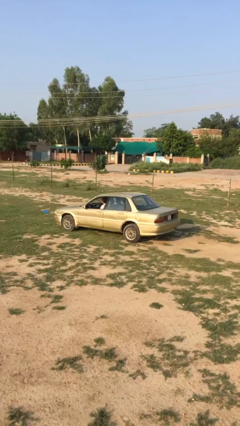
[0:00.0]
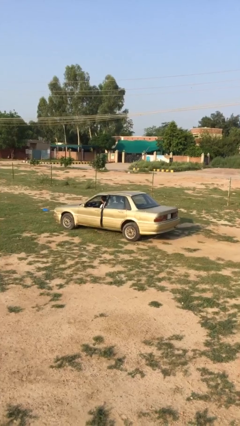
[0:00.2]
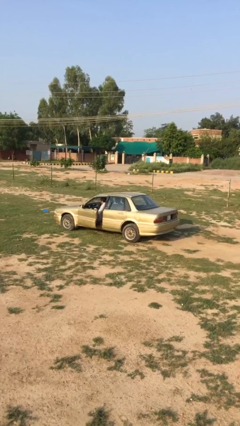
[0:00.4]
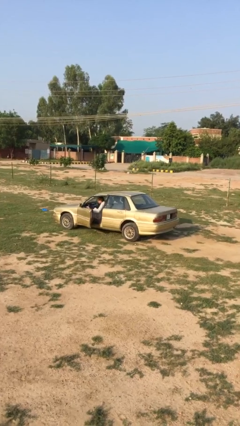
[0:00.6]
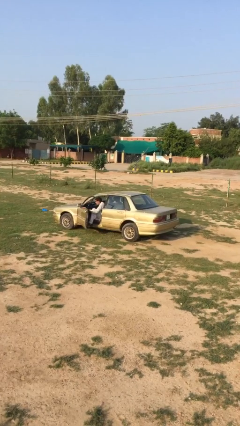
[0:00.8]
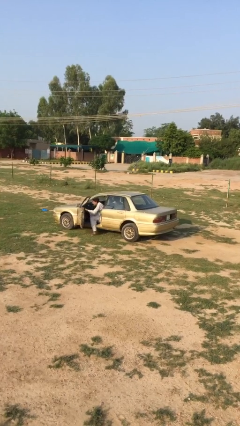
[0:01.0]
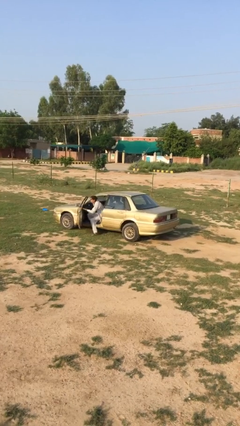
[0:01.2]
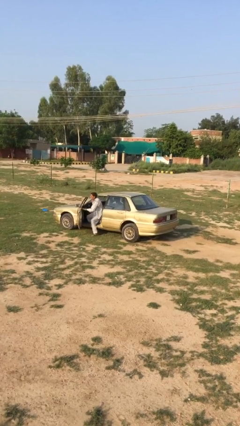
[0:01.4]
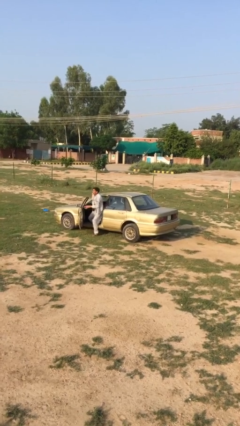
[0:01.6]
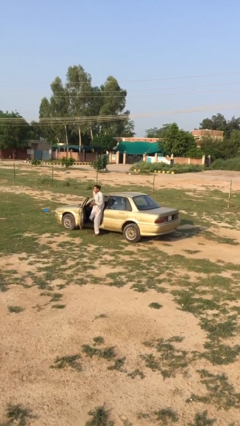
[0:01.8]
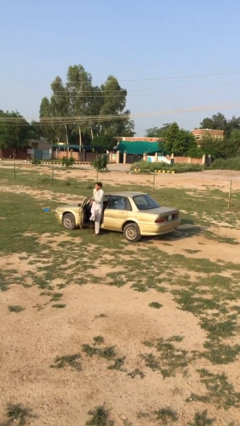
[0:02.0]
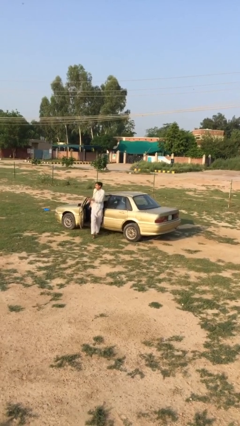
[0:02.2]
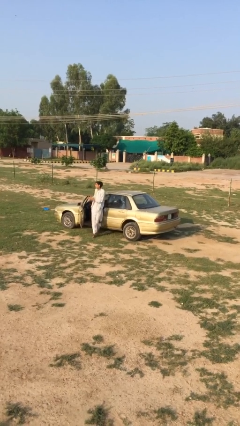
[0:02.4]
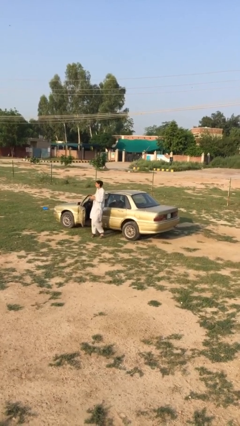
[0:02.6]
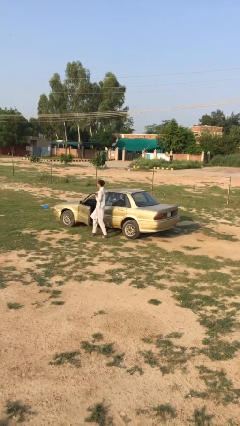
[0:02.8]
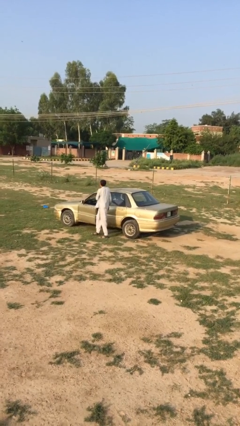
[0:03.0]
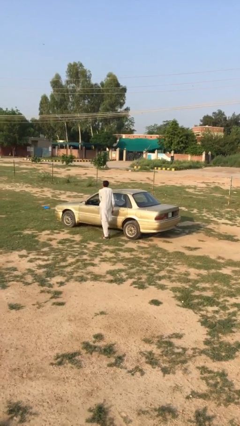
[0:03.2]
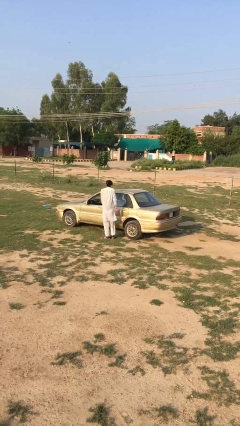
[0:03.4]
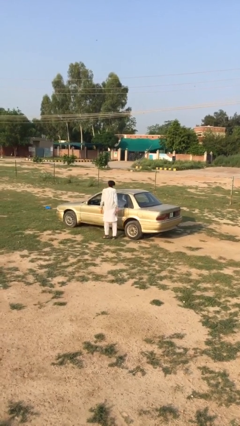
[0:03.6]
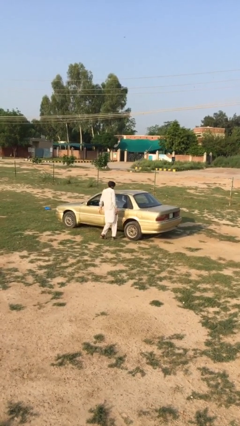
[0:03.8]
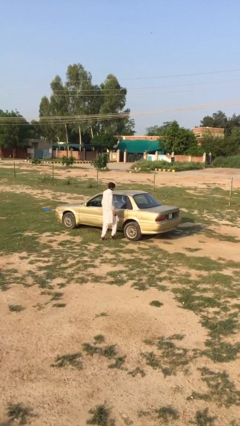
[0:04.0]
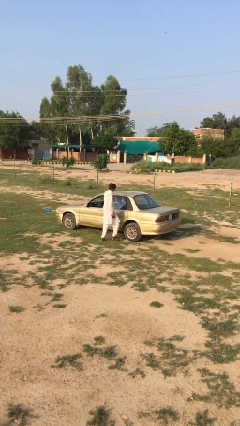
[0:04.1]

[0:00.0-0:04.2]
car drops off person

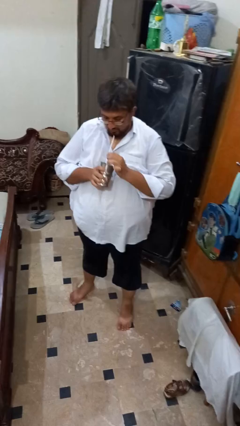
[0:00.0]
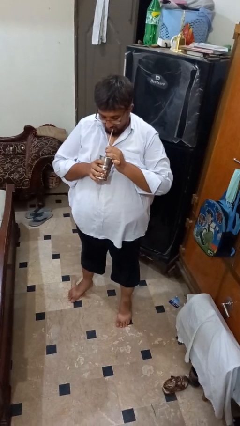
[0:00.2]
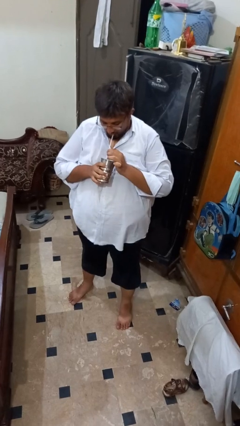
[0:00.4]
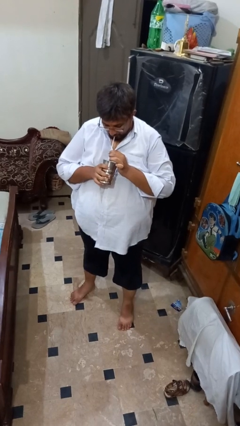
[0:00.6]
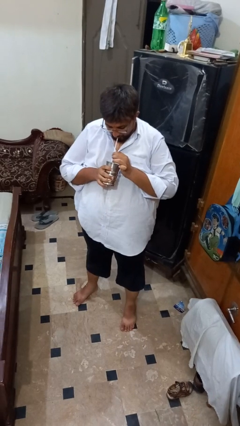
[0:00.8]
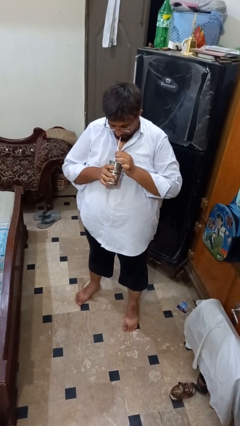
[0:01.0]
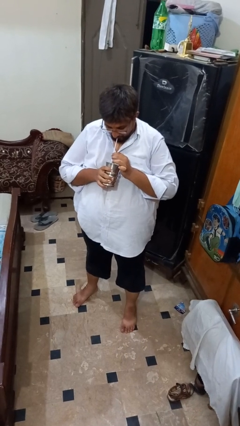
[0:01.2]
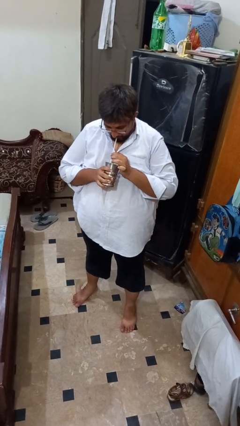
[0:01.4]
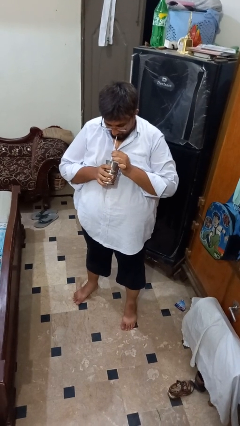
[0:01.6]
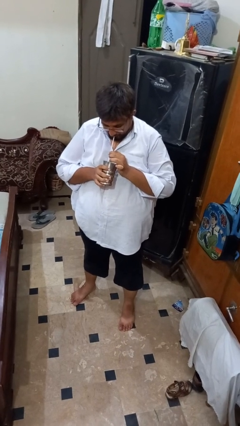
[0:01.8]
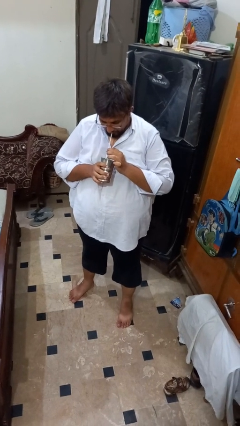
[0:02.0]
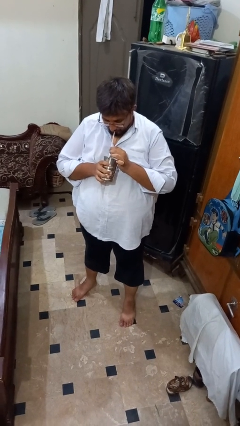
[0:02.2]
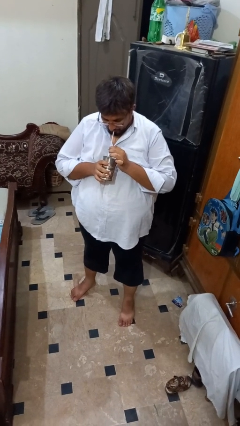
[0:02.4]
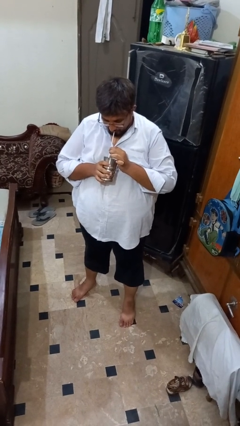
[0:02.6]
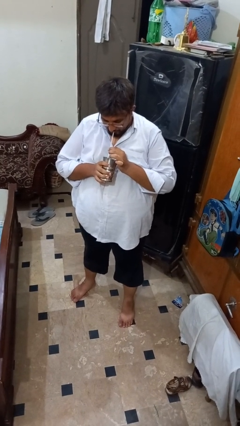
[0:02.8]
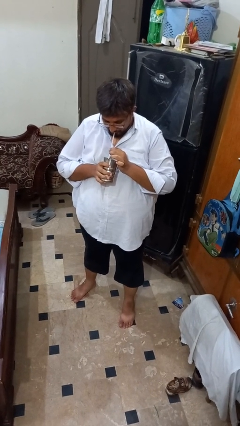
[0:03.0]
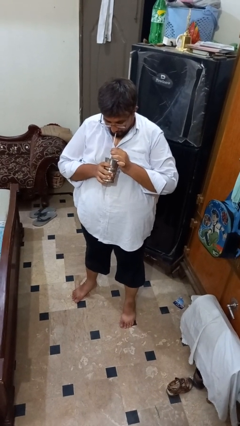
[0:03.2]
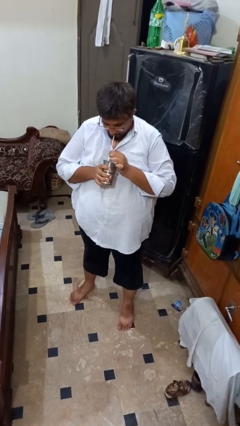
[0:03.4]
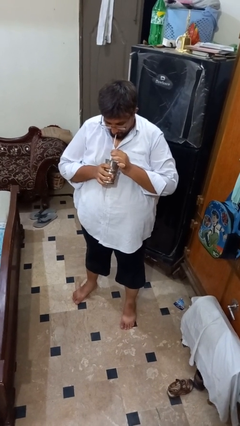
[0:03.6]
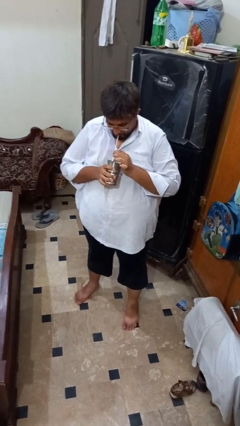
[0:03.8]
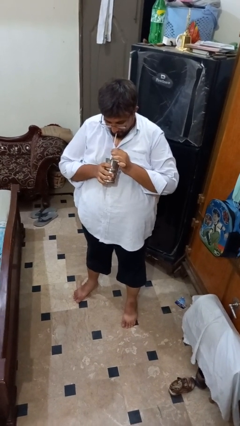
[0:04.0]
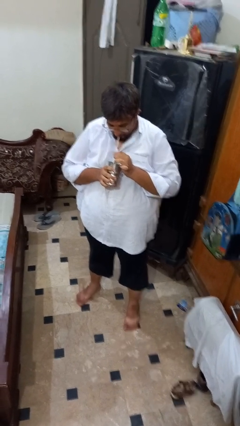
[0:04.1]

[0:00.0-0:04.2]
person drinks from straw

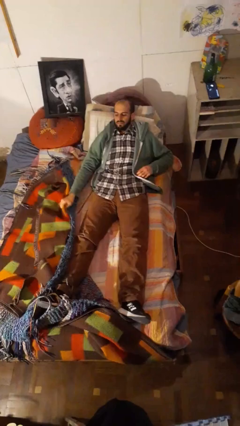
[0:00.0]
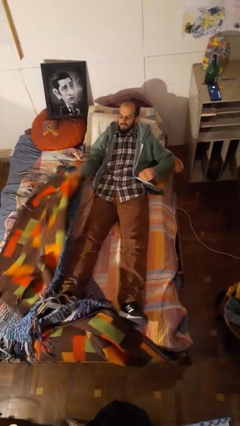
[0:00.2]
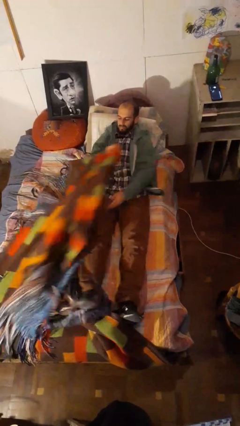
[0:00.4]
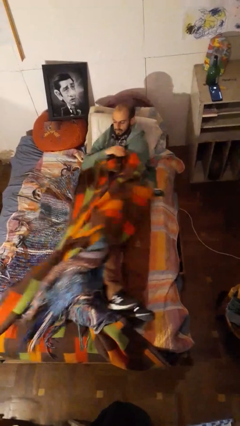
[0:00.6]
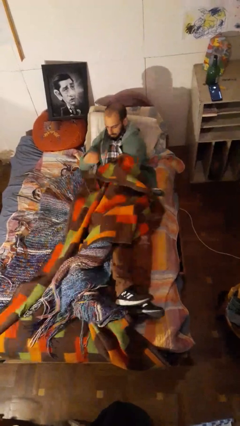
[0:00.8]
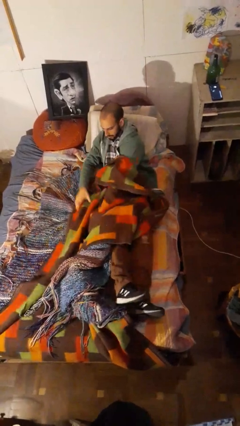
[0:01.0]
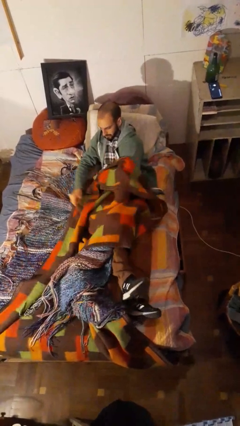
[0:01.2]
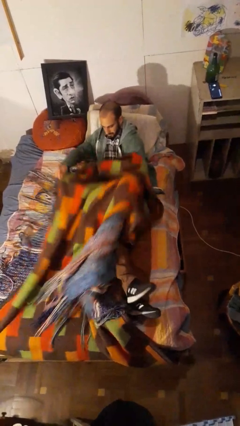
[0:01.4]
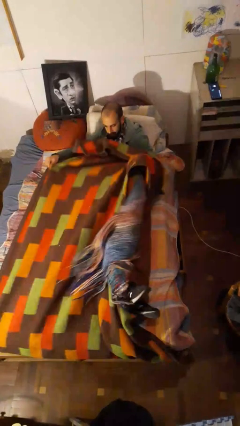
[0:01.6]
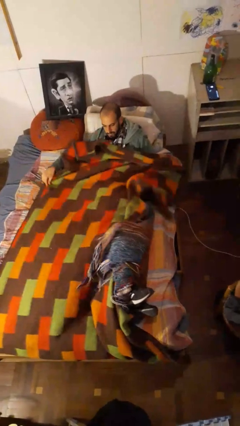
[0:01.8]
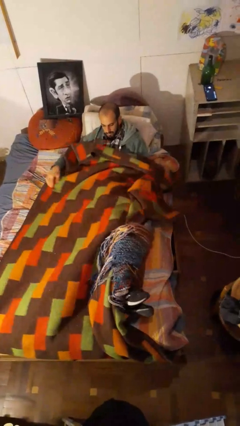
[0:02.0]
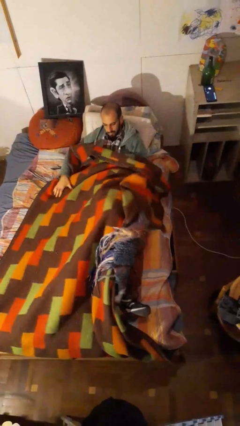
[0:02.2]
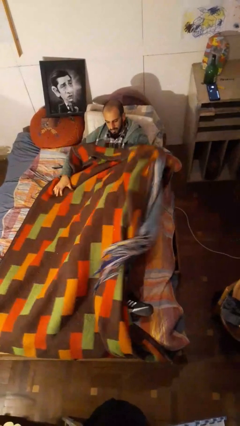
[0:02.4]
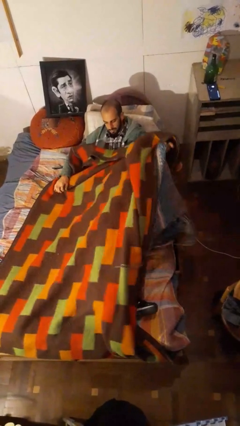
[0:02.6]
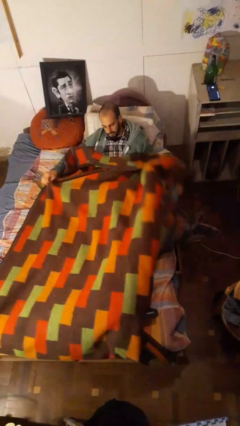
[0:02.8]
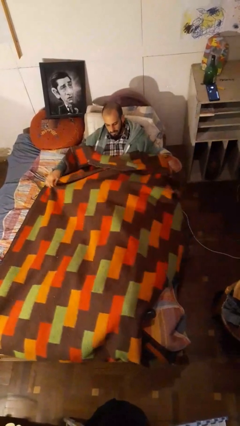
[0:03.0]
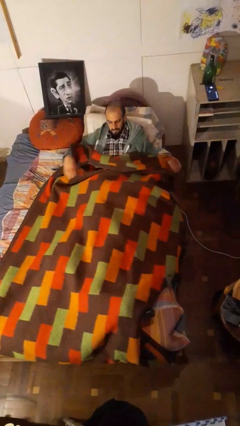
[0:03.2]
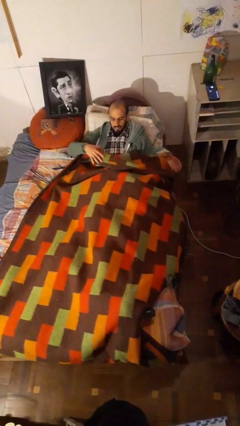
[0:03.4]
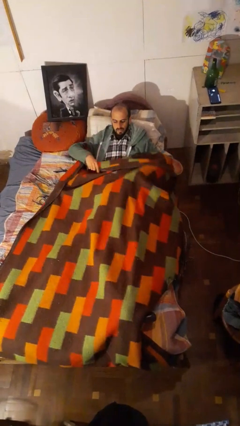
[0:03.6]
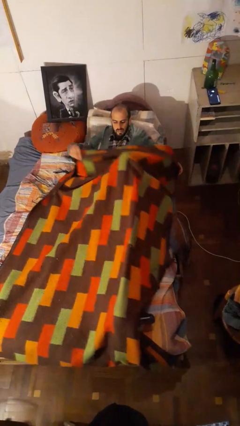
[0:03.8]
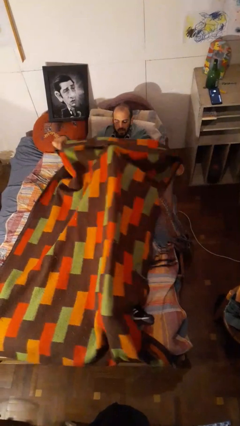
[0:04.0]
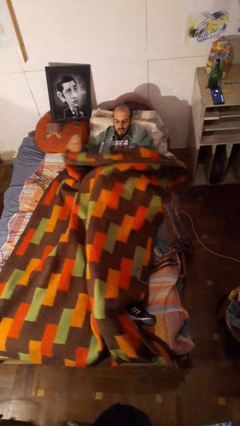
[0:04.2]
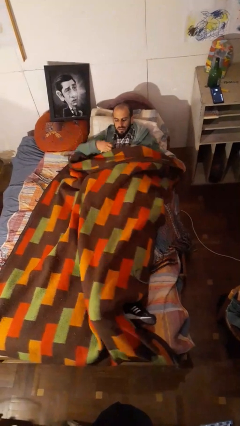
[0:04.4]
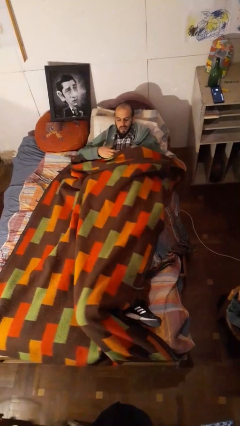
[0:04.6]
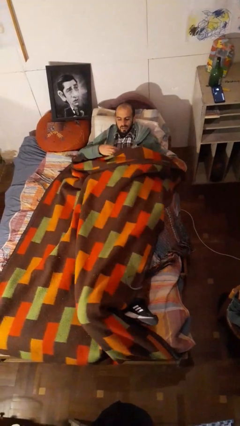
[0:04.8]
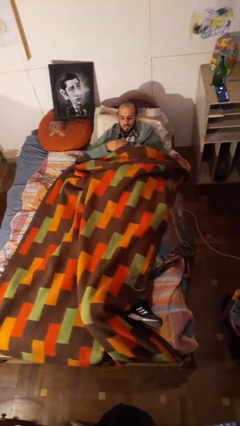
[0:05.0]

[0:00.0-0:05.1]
person covers with bedsheets

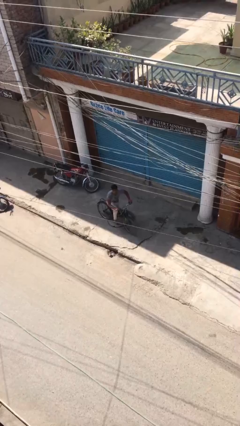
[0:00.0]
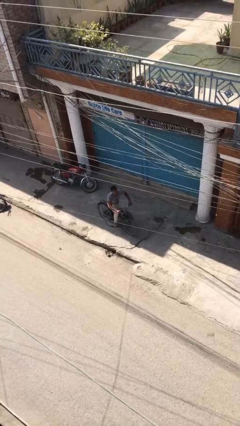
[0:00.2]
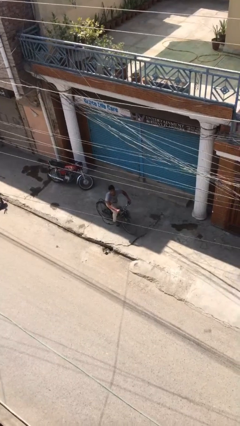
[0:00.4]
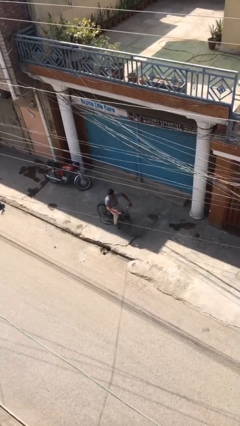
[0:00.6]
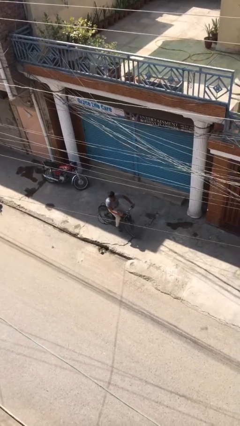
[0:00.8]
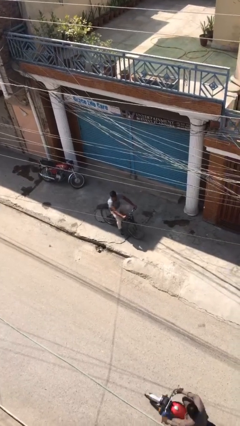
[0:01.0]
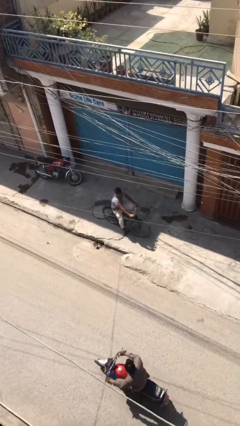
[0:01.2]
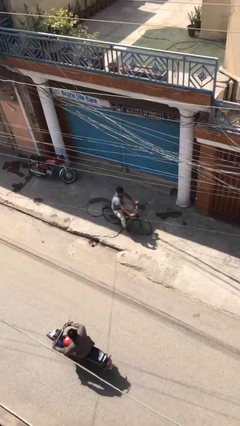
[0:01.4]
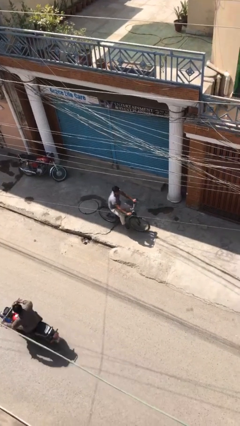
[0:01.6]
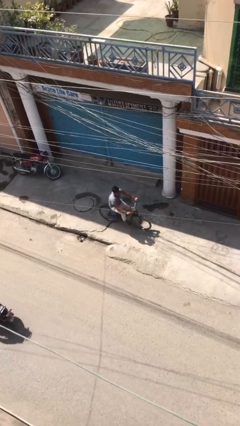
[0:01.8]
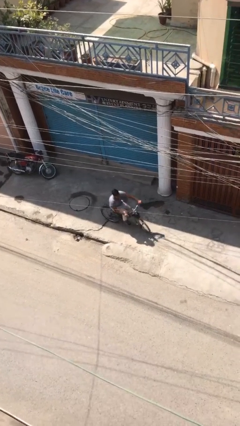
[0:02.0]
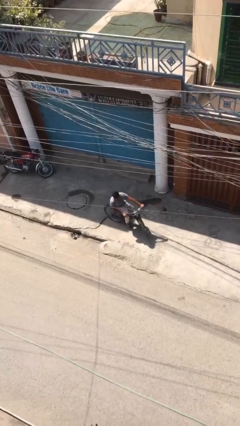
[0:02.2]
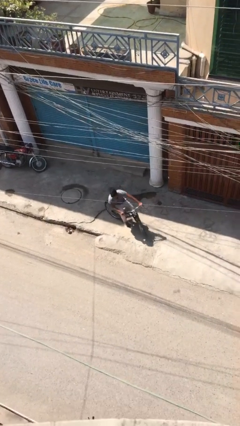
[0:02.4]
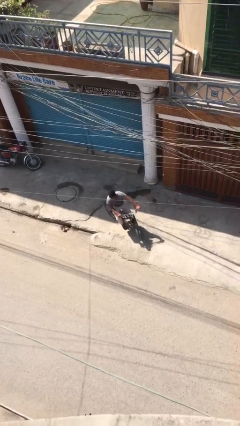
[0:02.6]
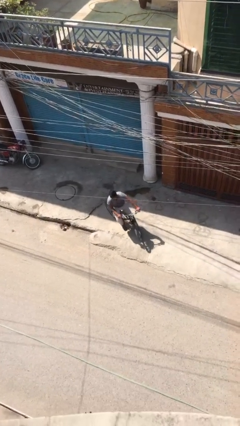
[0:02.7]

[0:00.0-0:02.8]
person rides bicycle

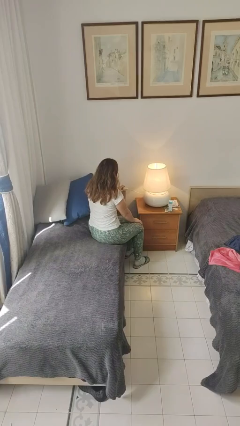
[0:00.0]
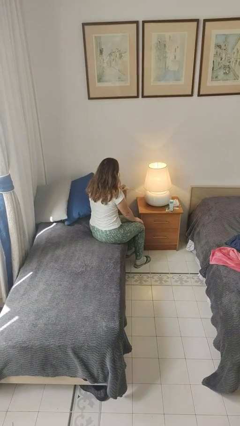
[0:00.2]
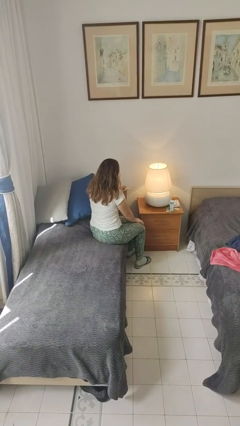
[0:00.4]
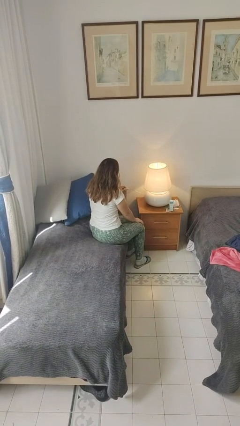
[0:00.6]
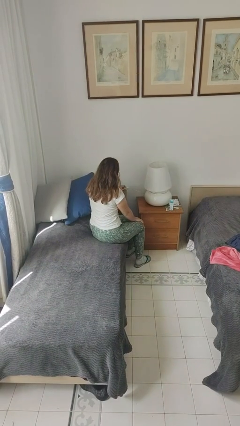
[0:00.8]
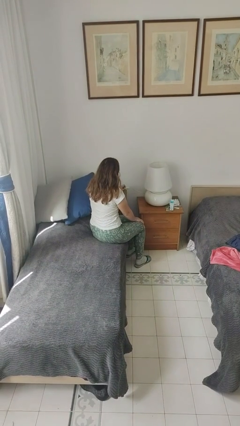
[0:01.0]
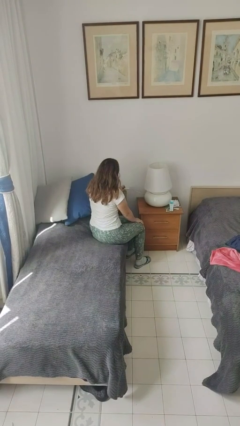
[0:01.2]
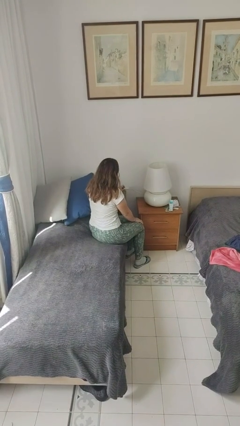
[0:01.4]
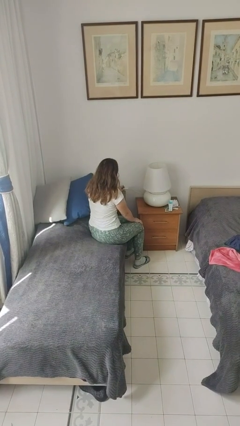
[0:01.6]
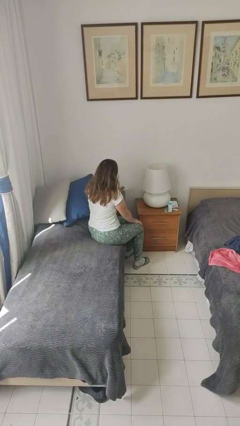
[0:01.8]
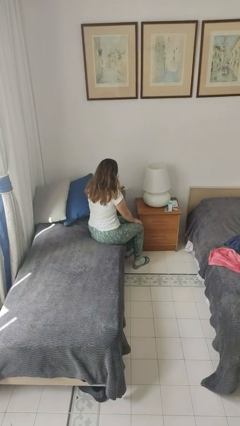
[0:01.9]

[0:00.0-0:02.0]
person turns off lamp
